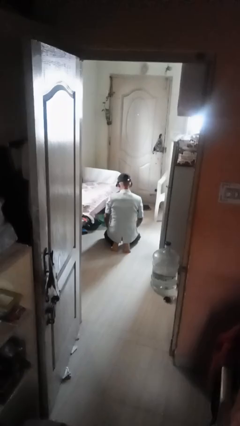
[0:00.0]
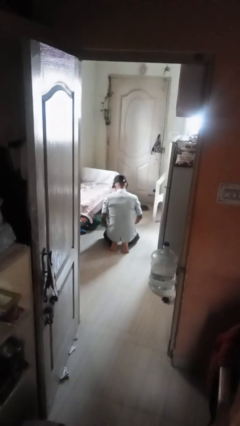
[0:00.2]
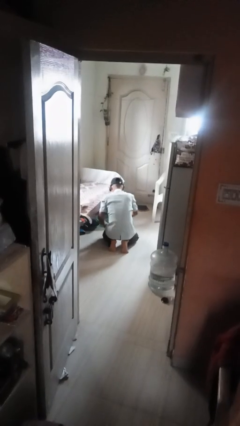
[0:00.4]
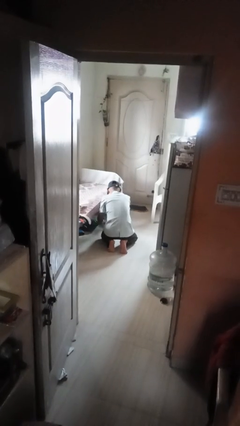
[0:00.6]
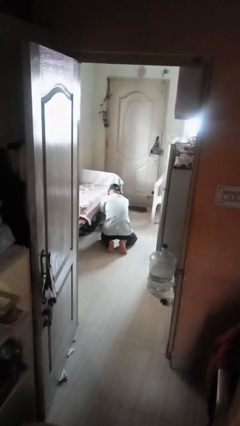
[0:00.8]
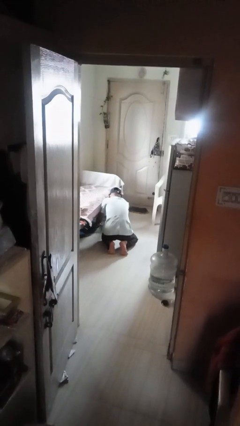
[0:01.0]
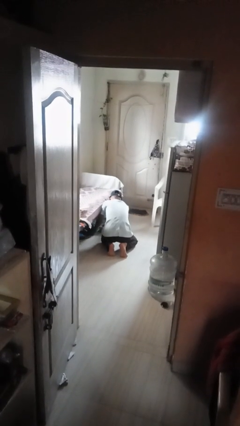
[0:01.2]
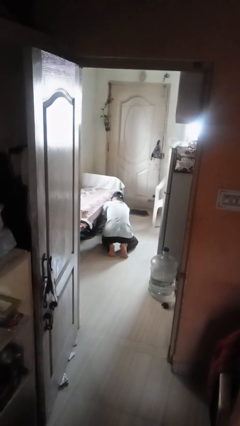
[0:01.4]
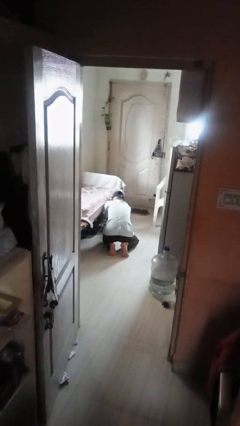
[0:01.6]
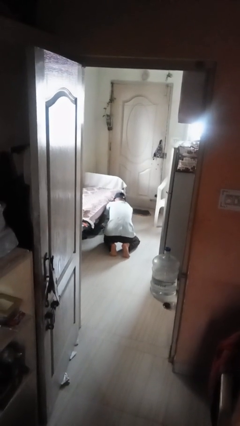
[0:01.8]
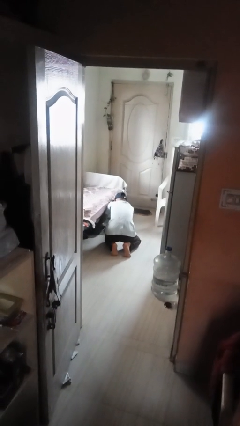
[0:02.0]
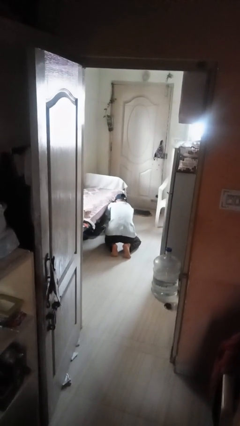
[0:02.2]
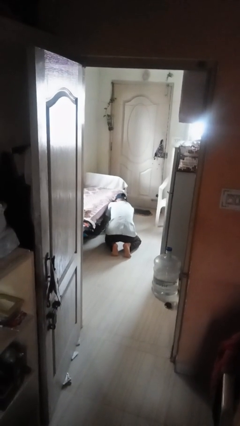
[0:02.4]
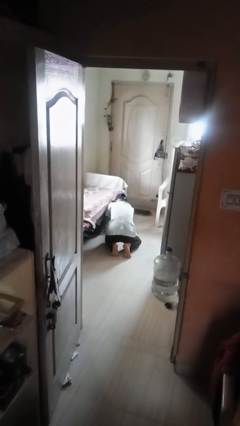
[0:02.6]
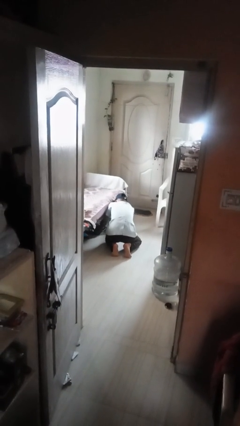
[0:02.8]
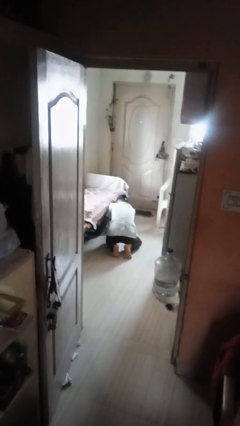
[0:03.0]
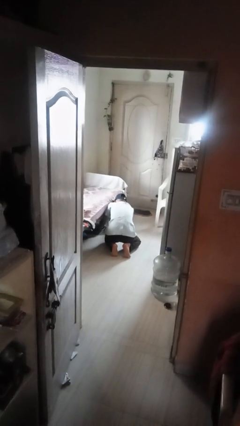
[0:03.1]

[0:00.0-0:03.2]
person searches under bed

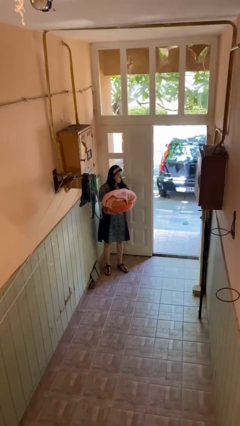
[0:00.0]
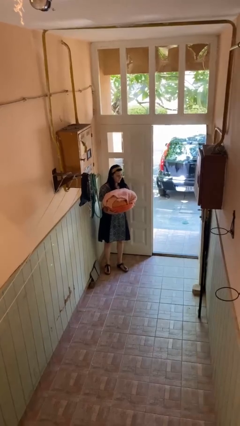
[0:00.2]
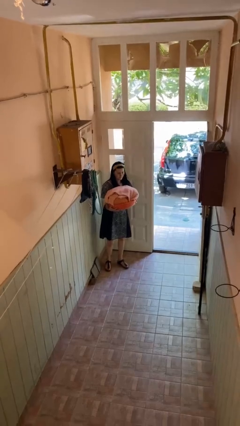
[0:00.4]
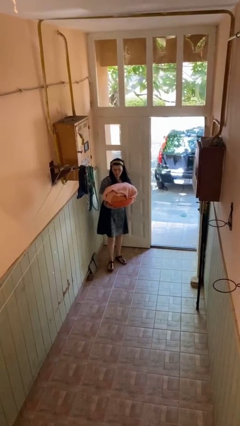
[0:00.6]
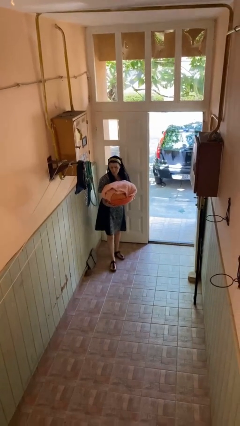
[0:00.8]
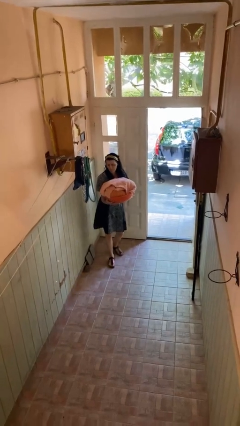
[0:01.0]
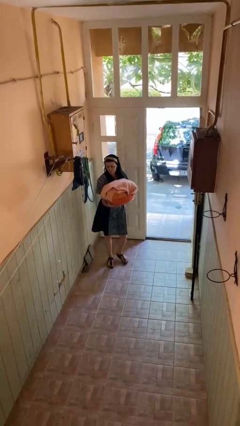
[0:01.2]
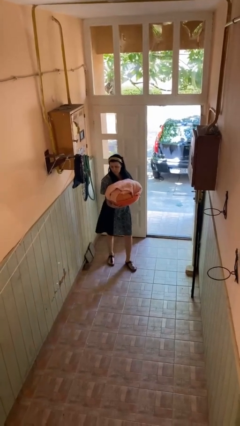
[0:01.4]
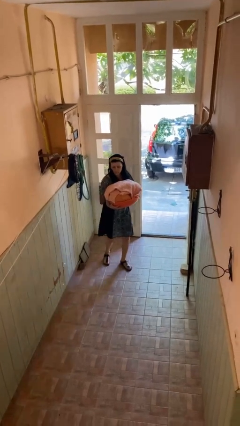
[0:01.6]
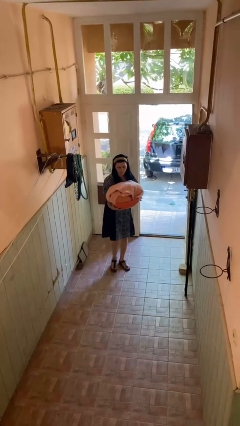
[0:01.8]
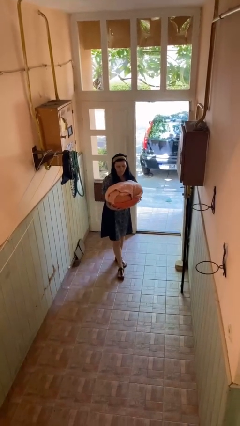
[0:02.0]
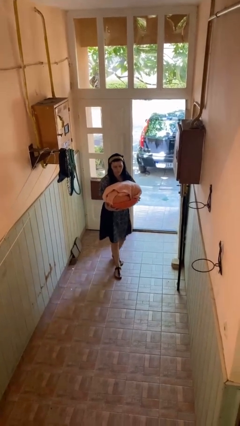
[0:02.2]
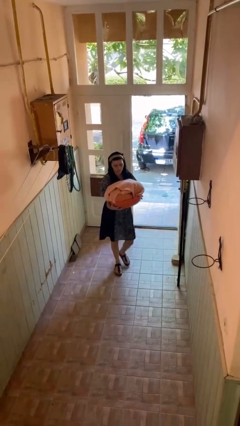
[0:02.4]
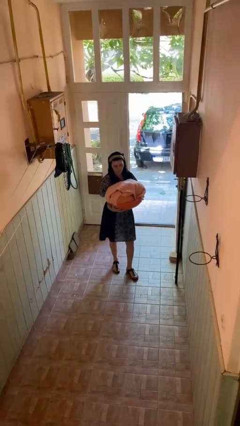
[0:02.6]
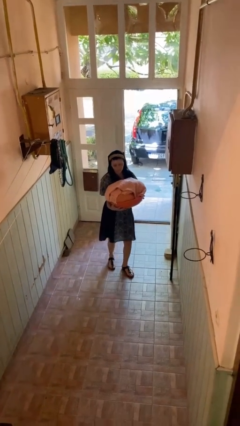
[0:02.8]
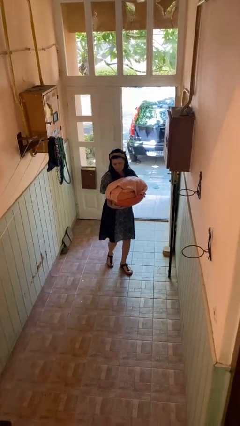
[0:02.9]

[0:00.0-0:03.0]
person carries laundry basket

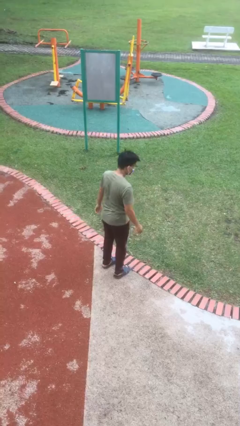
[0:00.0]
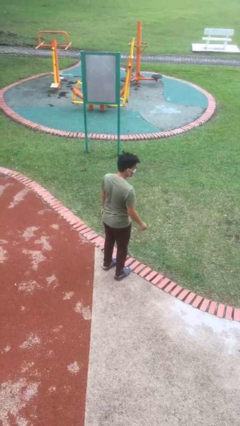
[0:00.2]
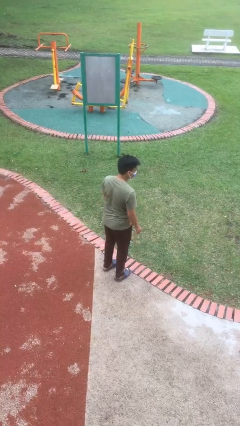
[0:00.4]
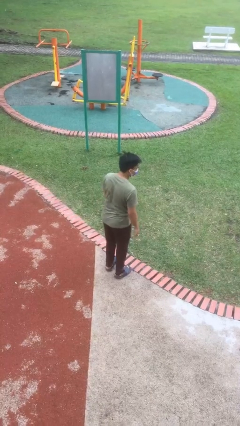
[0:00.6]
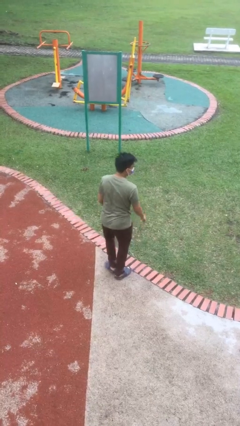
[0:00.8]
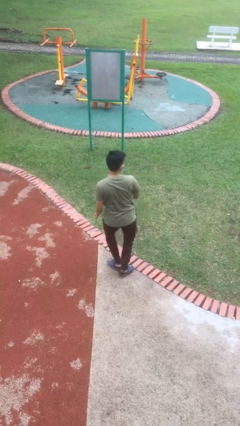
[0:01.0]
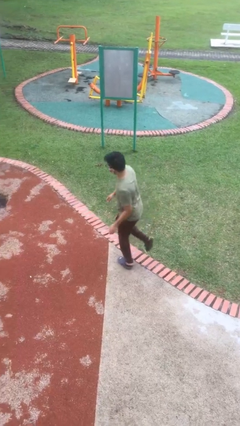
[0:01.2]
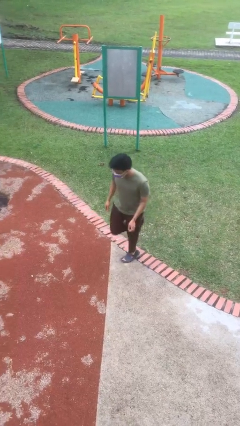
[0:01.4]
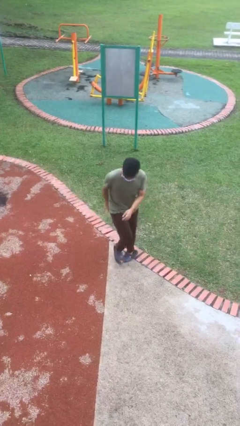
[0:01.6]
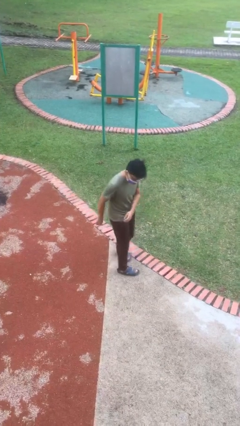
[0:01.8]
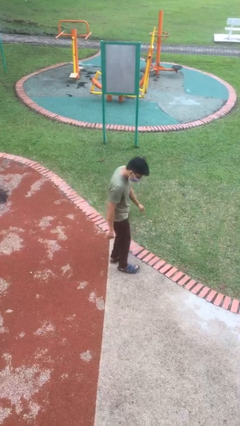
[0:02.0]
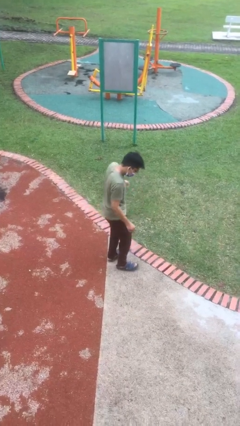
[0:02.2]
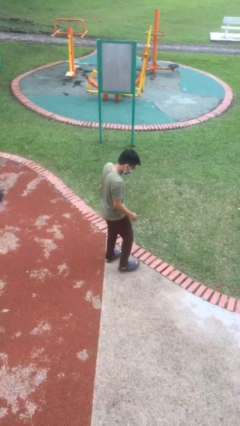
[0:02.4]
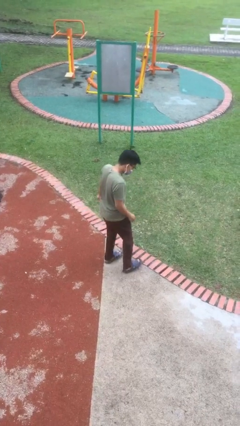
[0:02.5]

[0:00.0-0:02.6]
person twirls

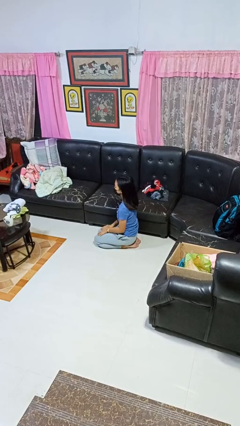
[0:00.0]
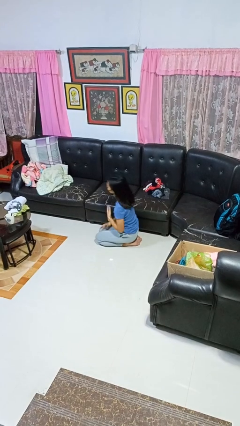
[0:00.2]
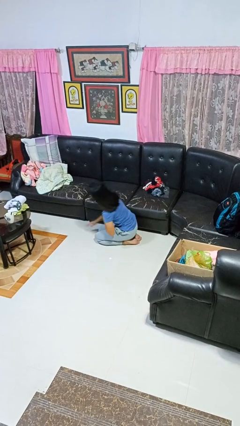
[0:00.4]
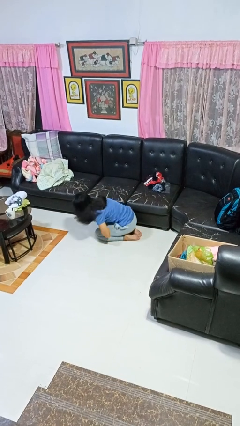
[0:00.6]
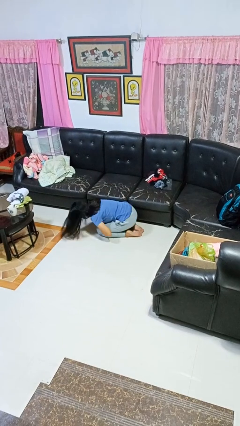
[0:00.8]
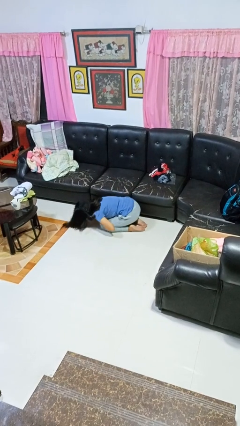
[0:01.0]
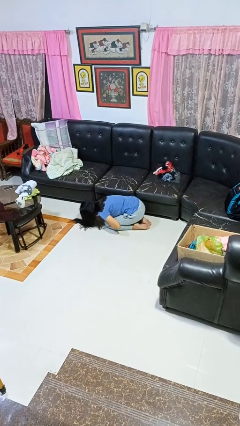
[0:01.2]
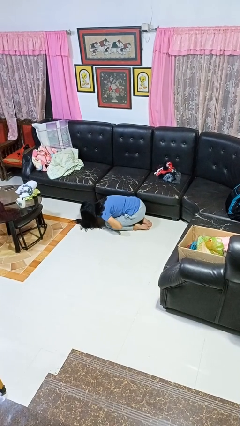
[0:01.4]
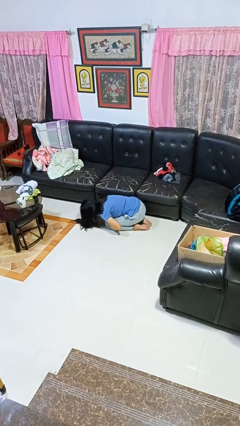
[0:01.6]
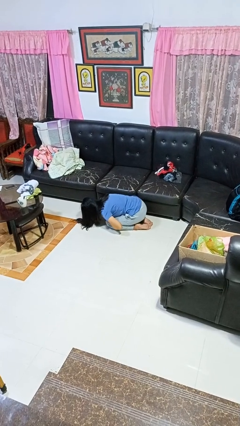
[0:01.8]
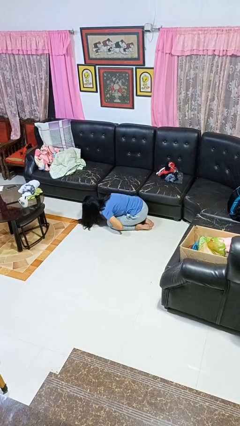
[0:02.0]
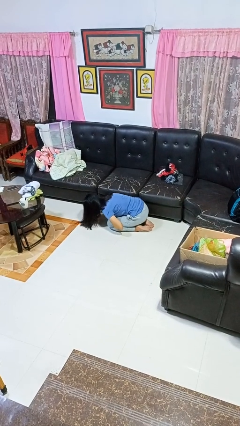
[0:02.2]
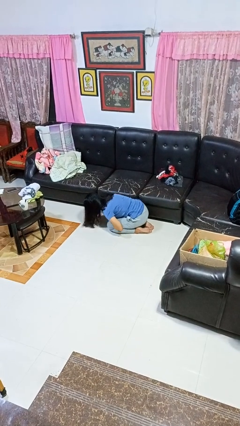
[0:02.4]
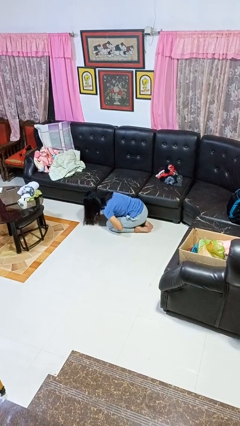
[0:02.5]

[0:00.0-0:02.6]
person searches under couch

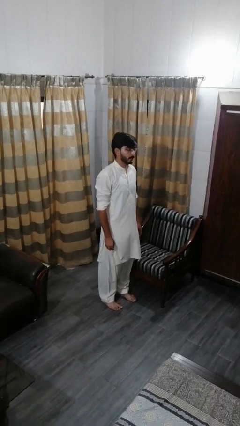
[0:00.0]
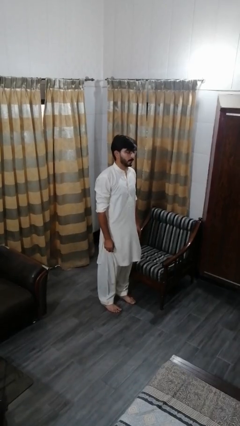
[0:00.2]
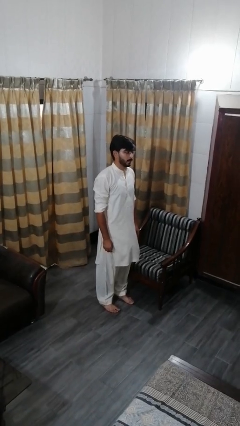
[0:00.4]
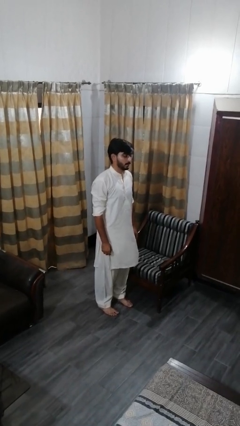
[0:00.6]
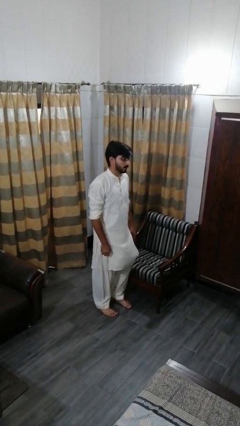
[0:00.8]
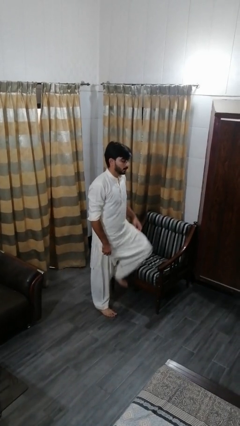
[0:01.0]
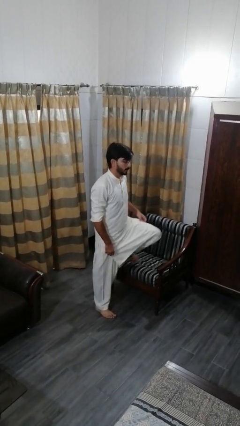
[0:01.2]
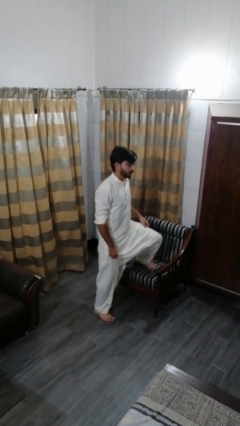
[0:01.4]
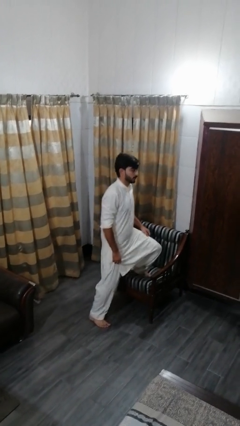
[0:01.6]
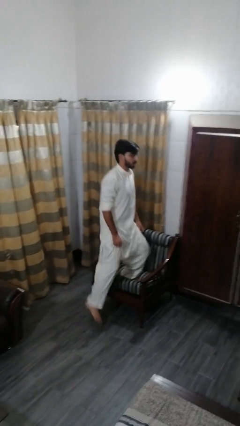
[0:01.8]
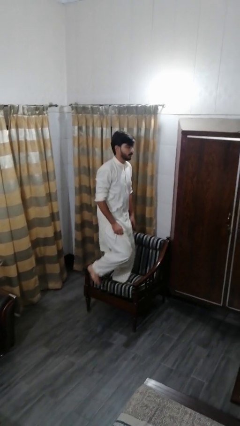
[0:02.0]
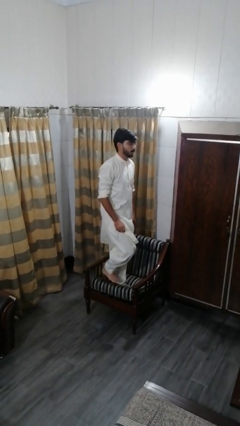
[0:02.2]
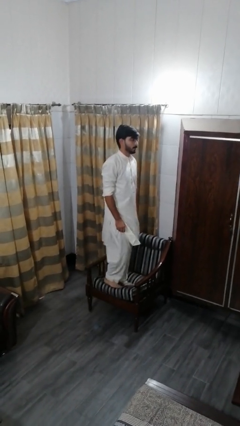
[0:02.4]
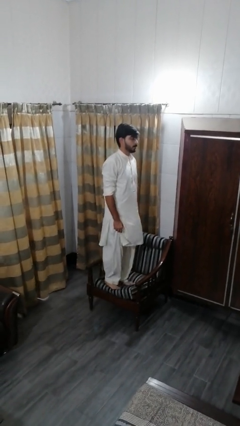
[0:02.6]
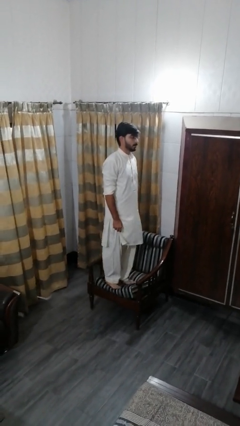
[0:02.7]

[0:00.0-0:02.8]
person climbs on chair

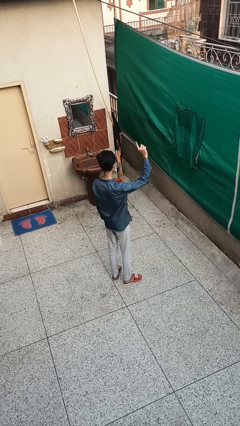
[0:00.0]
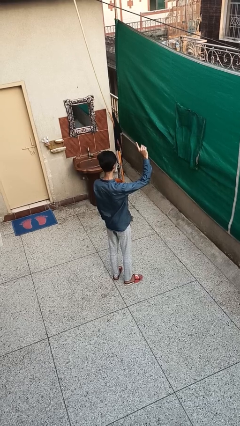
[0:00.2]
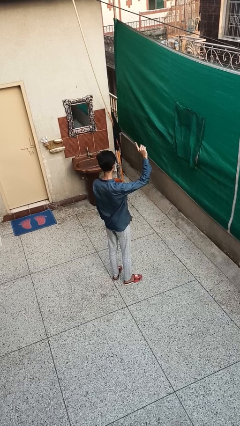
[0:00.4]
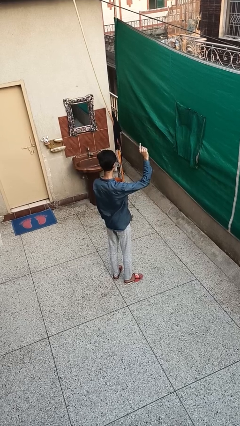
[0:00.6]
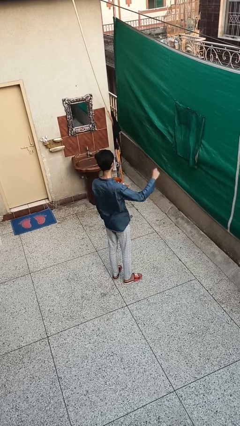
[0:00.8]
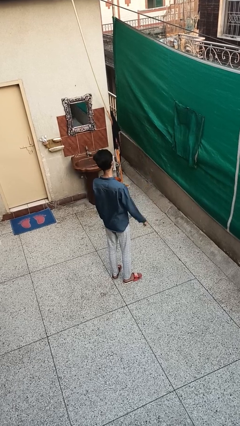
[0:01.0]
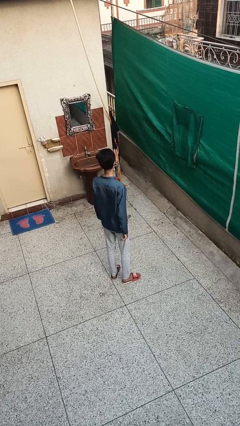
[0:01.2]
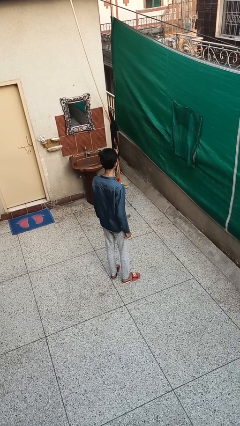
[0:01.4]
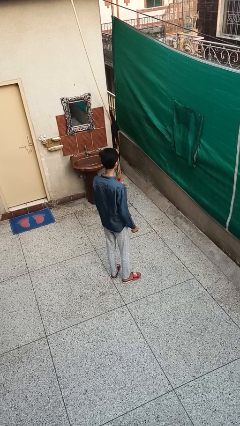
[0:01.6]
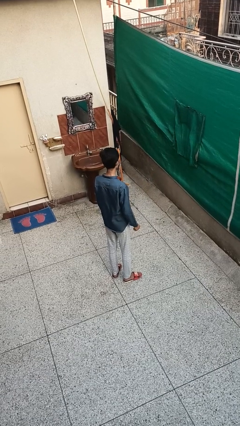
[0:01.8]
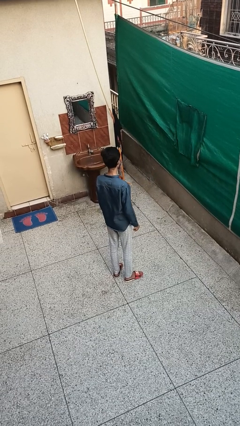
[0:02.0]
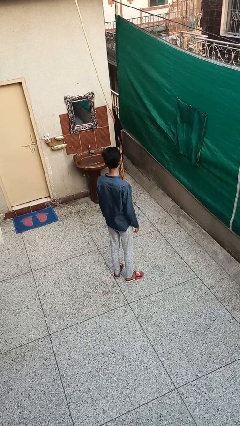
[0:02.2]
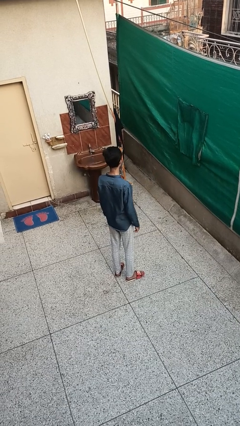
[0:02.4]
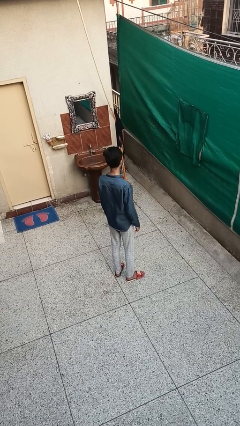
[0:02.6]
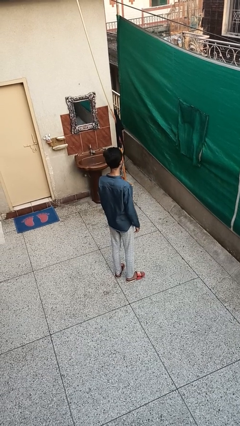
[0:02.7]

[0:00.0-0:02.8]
person gestures lower hand

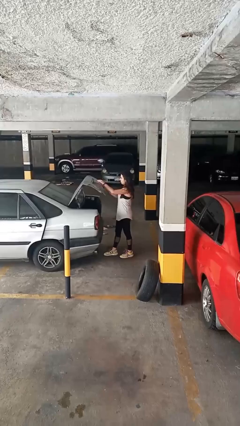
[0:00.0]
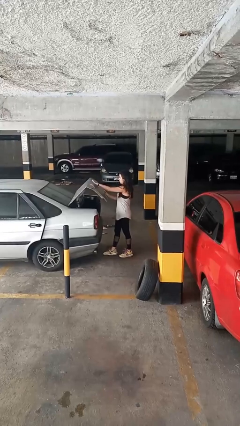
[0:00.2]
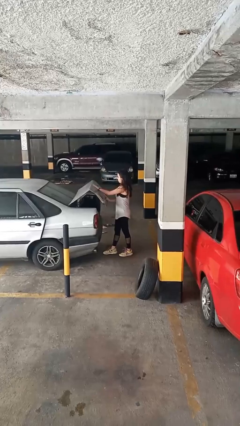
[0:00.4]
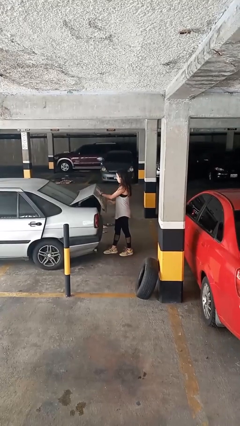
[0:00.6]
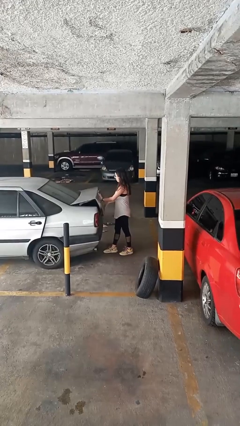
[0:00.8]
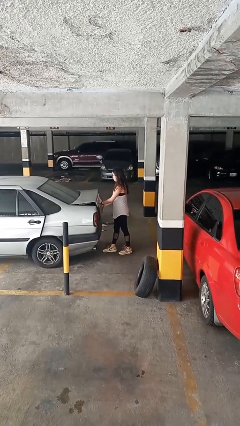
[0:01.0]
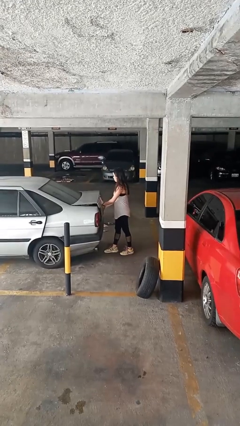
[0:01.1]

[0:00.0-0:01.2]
person closes car trunk
